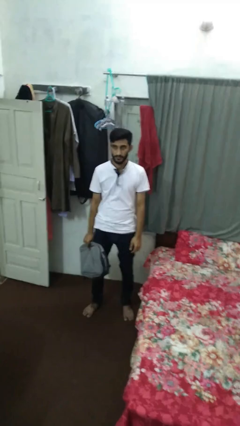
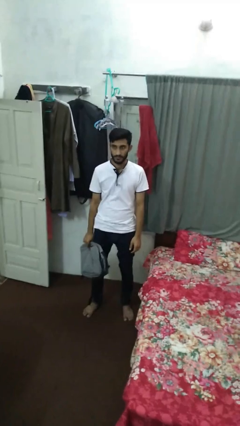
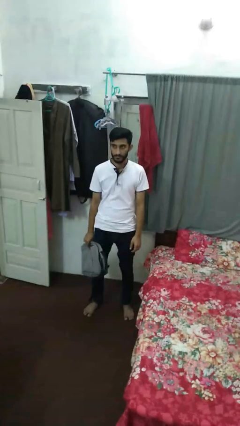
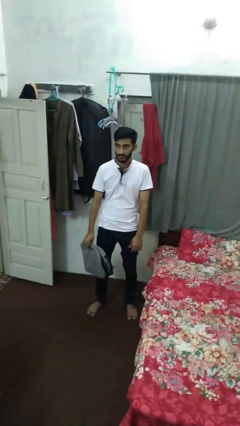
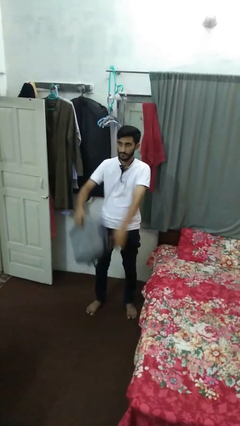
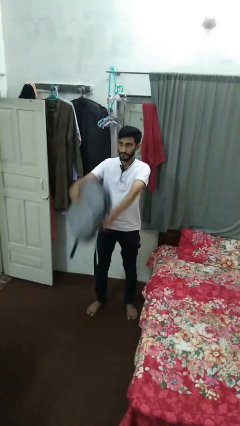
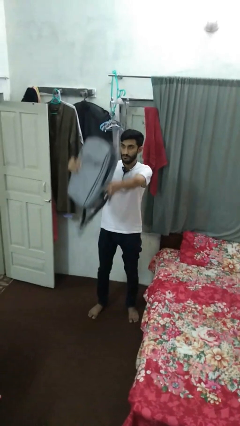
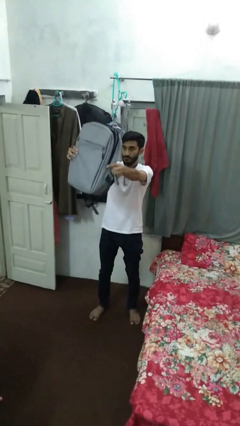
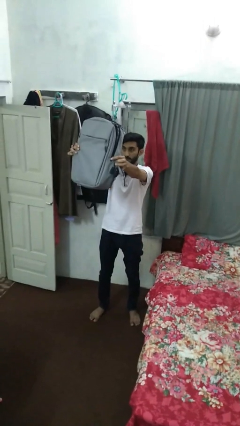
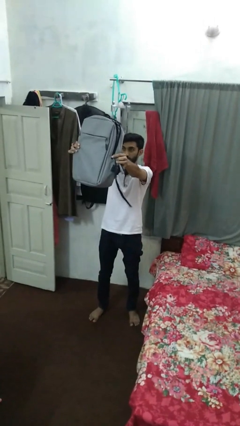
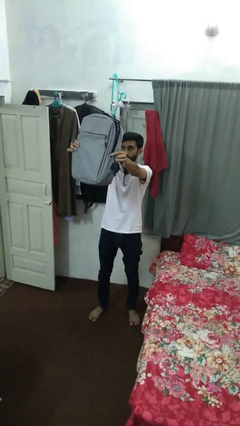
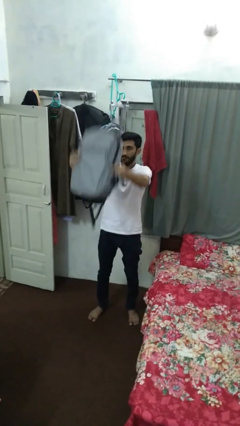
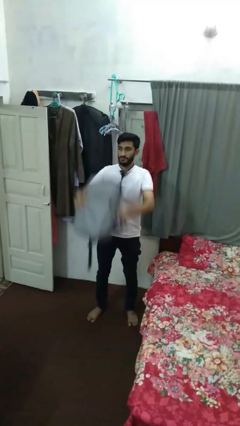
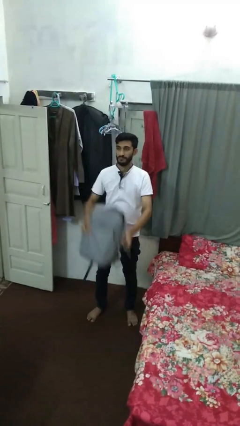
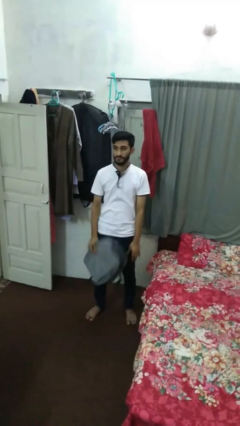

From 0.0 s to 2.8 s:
person holds object above head

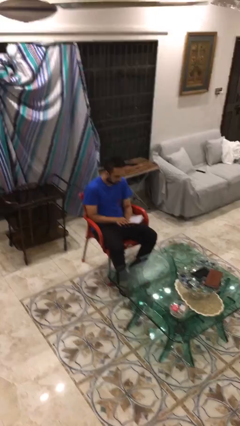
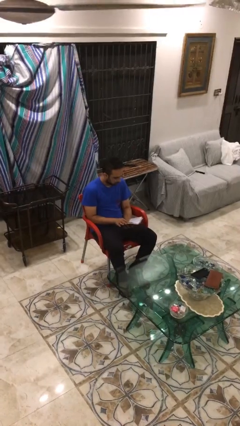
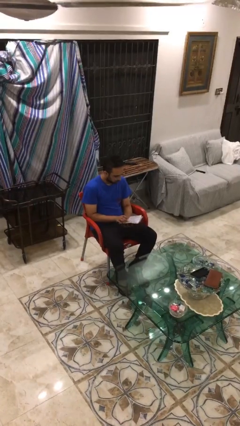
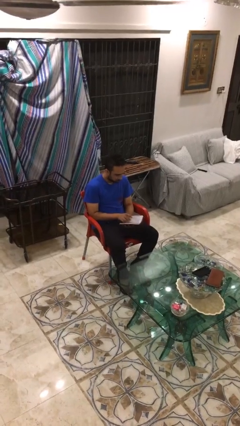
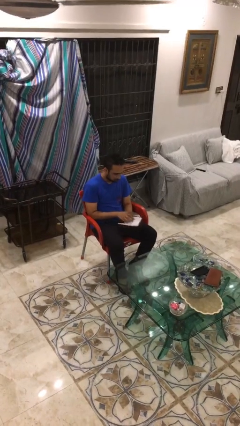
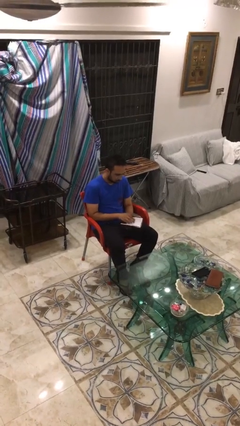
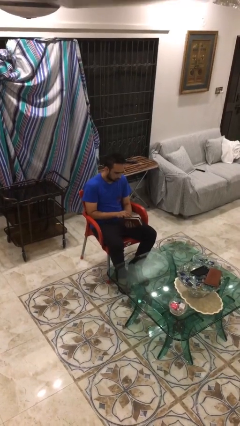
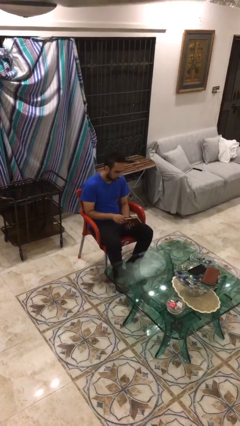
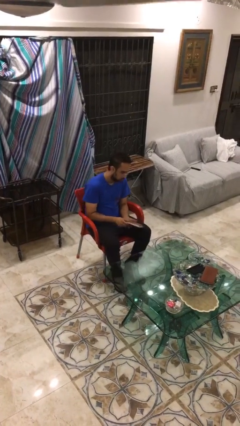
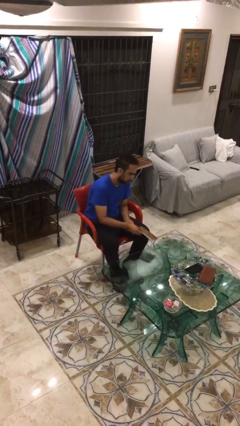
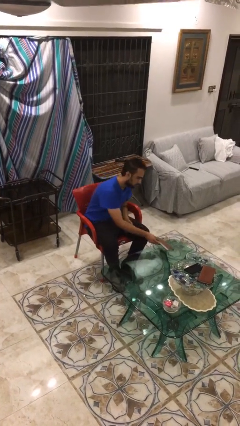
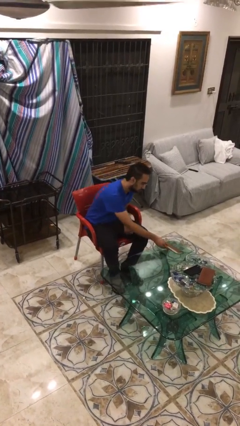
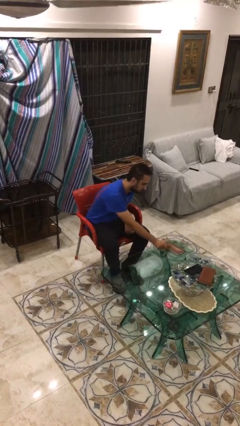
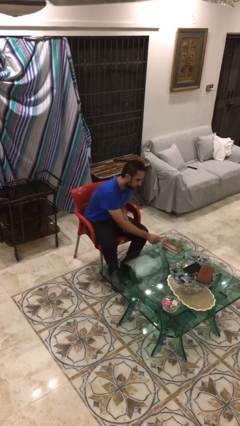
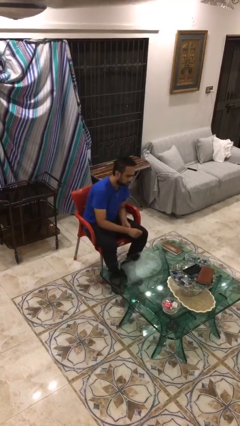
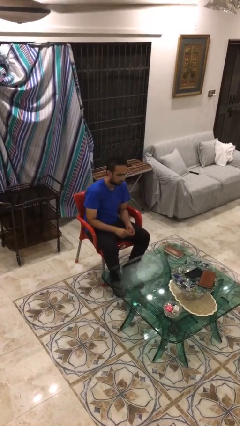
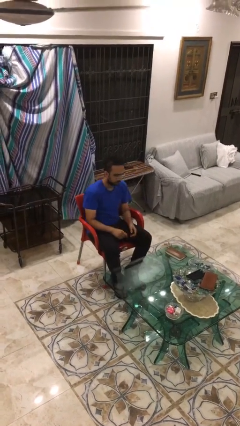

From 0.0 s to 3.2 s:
person puts down object on table

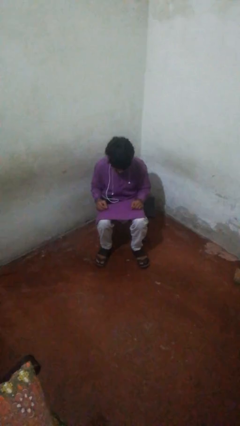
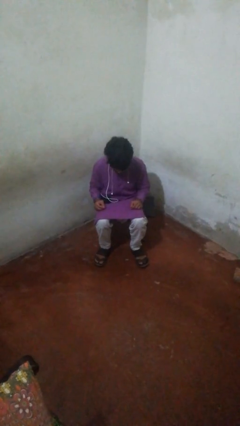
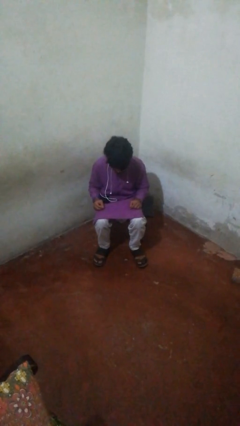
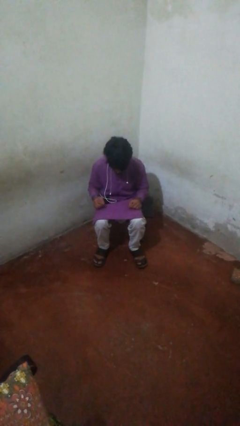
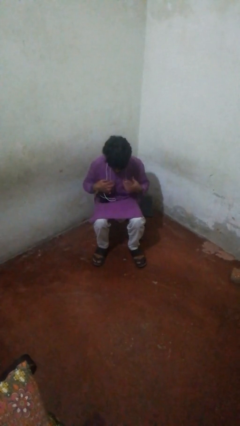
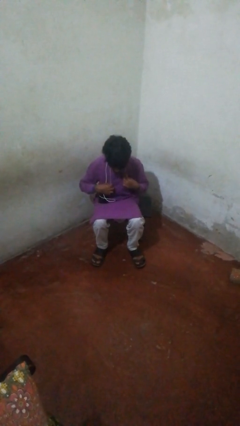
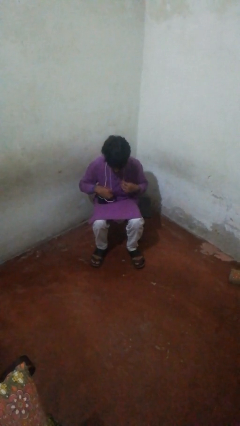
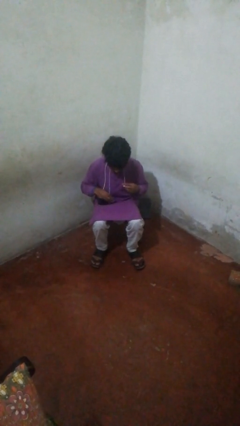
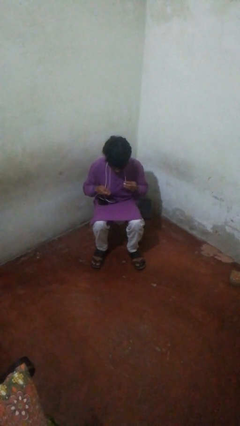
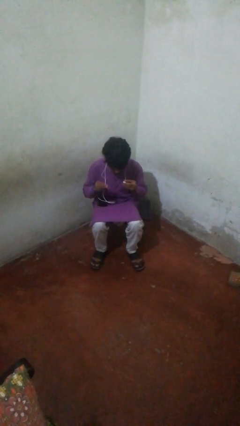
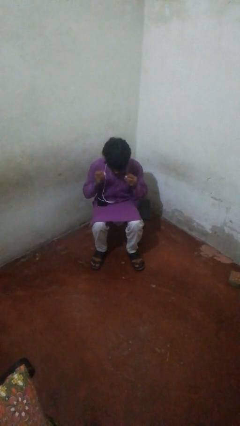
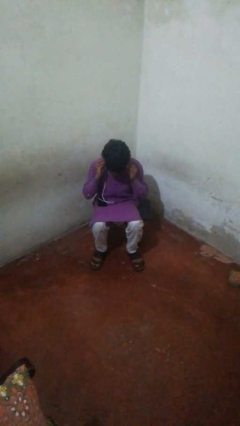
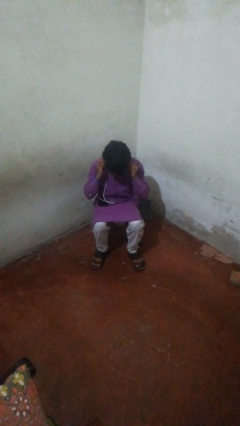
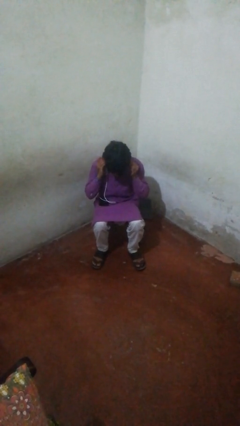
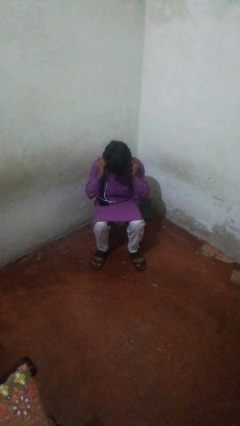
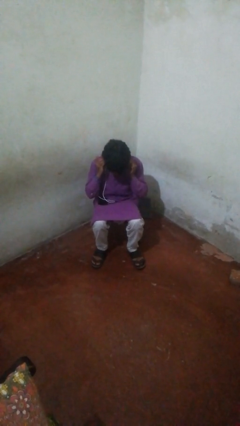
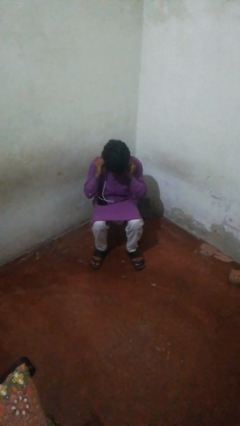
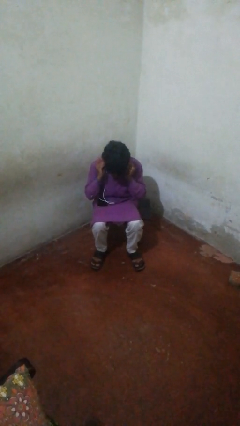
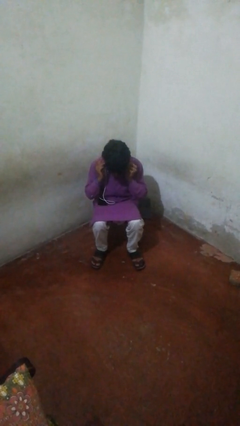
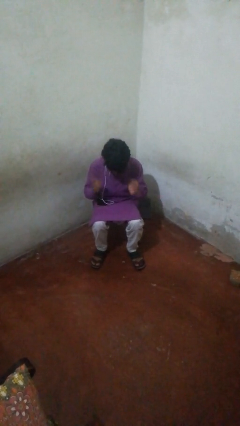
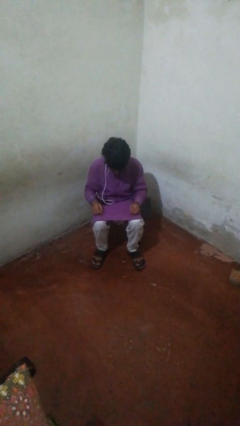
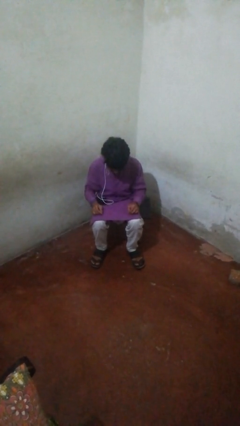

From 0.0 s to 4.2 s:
person puts on headphones

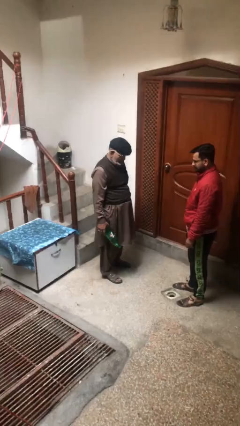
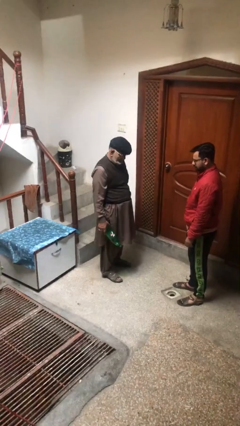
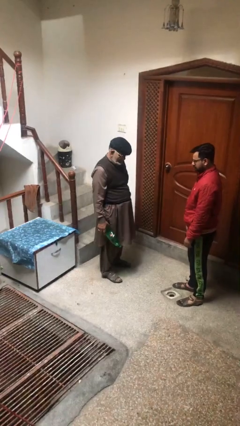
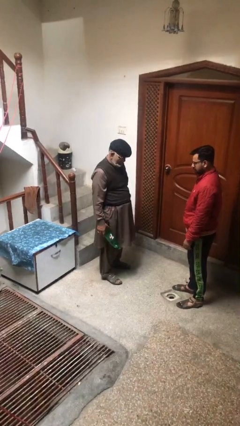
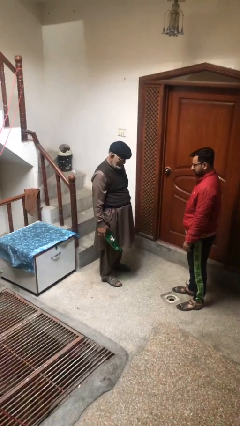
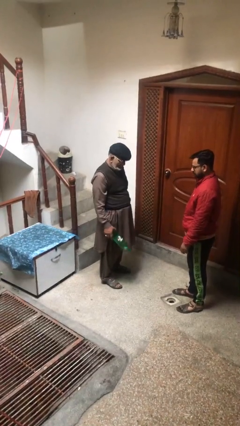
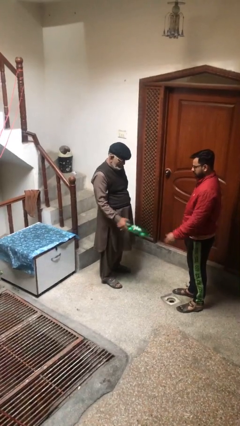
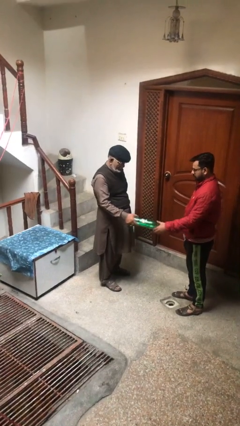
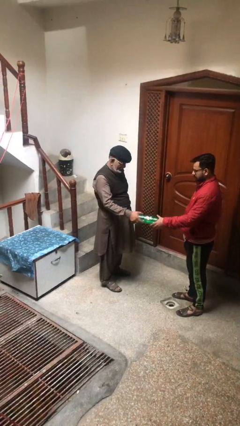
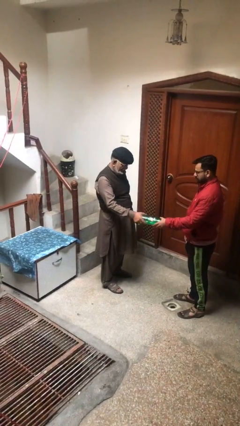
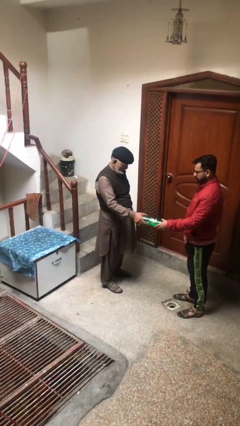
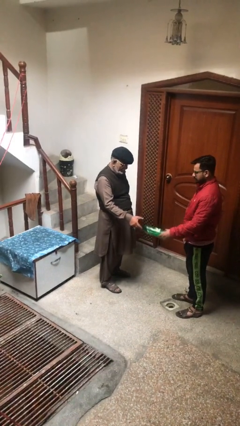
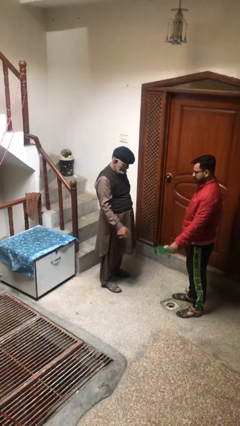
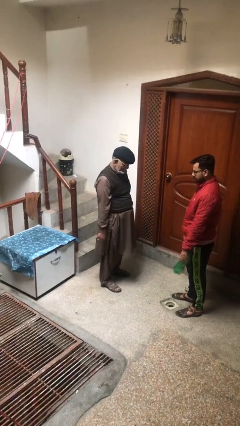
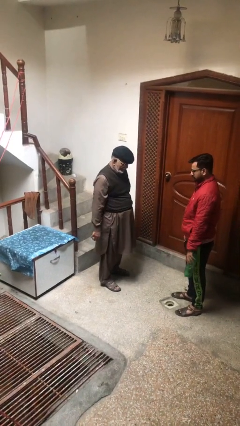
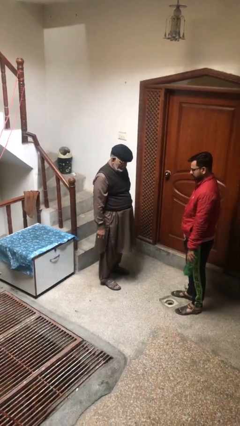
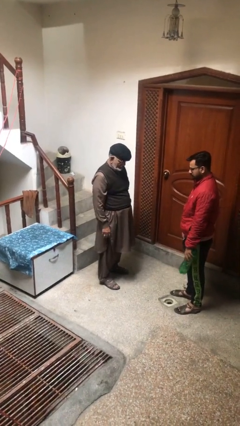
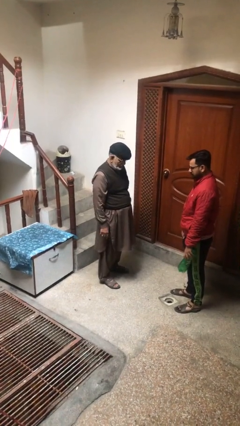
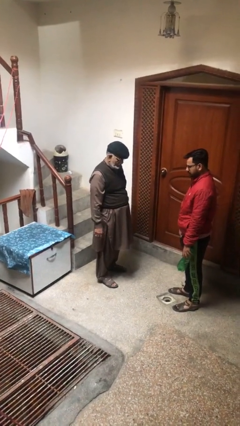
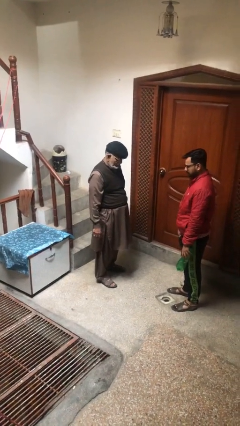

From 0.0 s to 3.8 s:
person transfers object to person

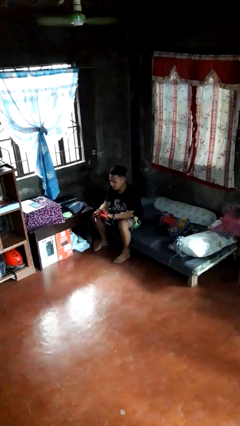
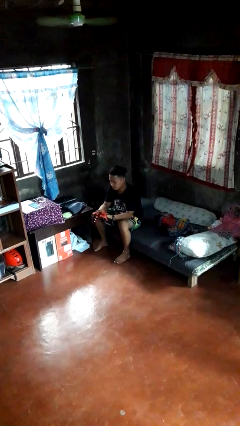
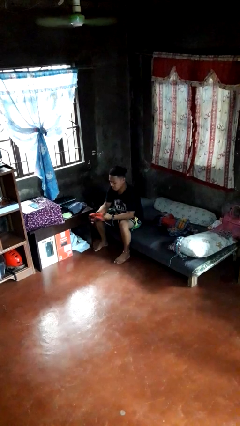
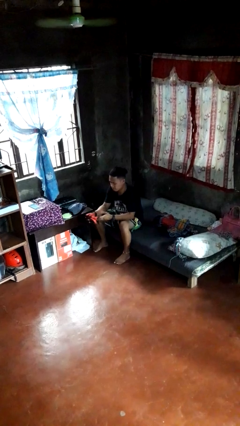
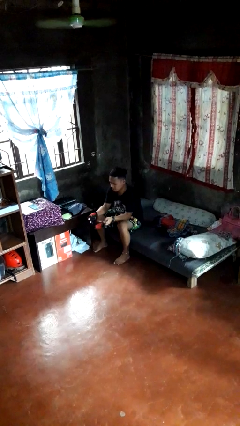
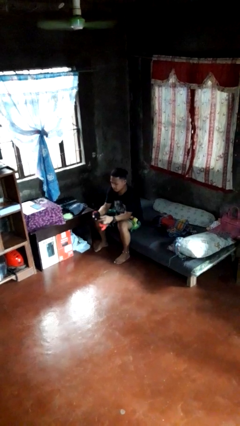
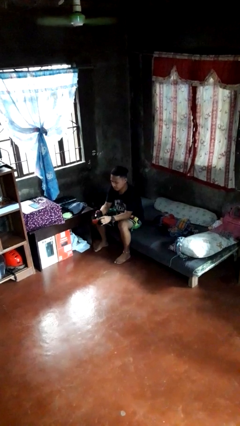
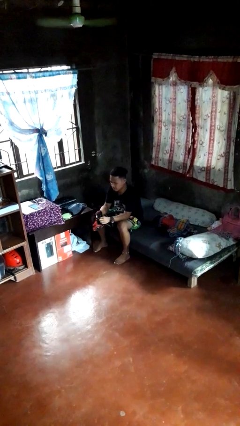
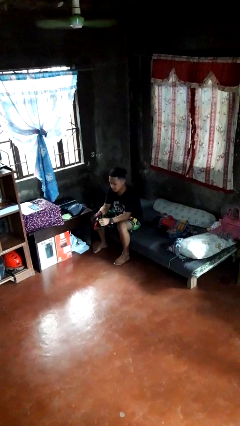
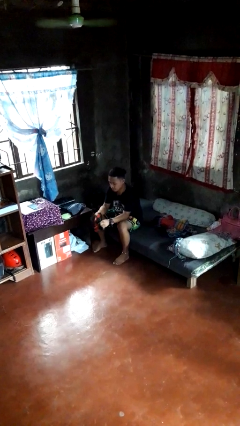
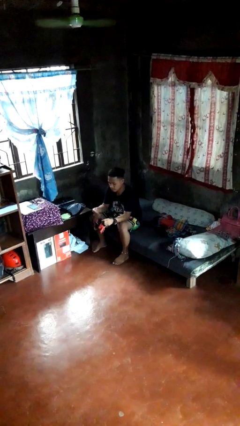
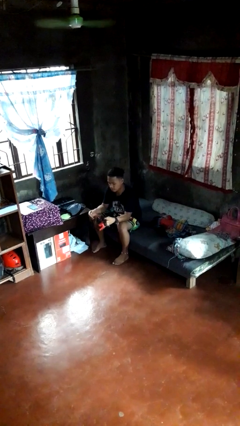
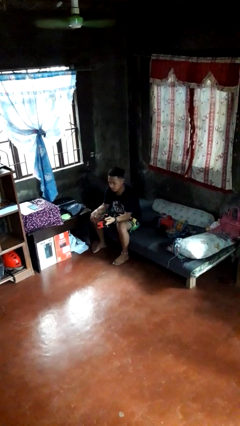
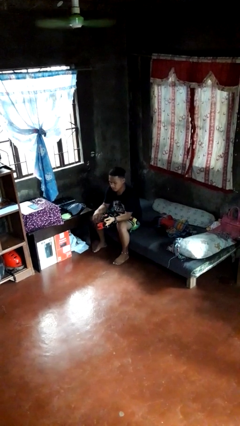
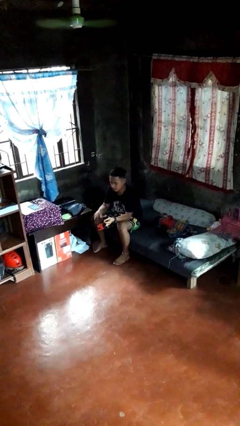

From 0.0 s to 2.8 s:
person takes off gloves

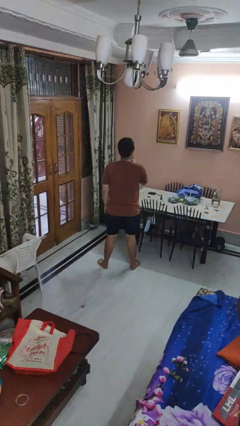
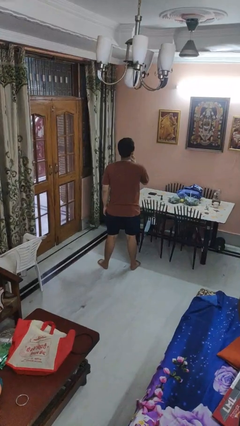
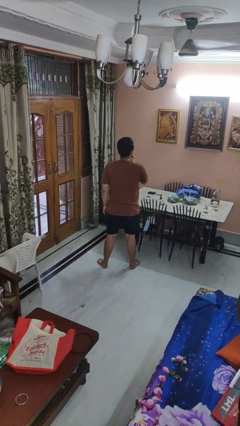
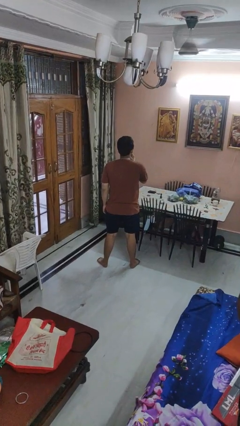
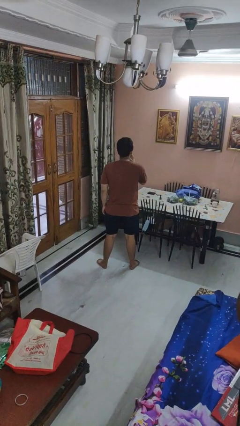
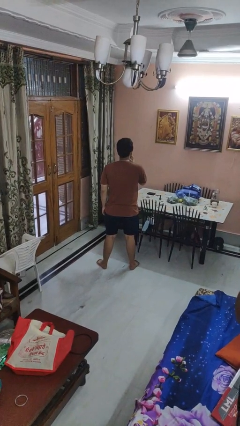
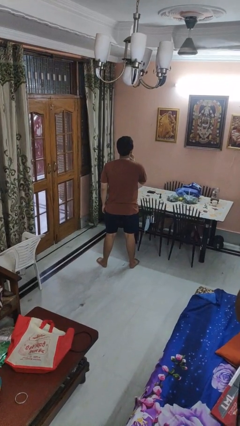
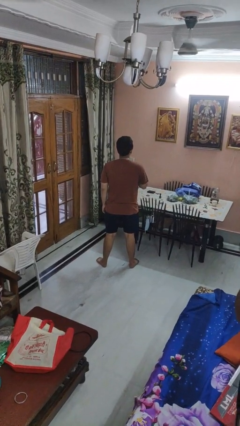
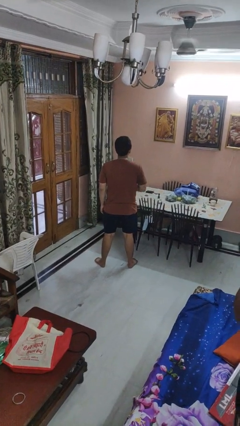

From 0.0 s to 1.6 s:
person strokes chin
